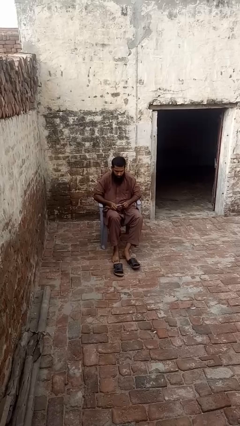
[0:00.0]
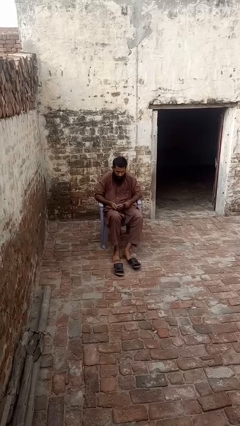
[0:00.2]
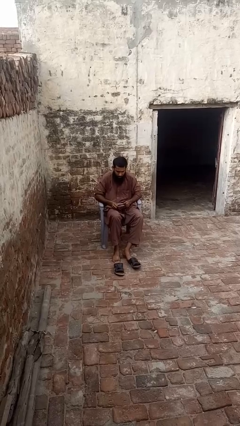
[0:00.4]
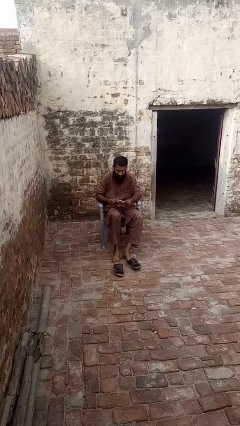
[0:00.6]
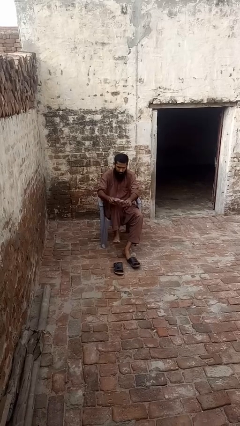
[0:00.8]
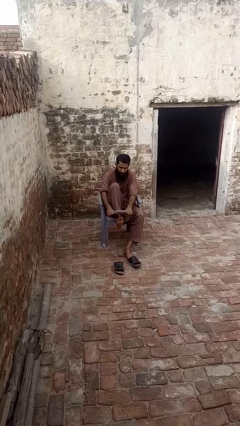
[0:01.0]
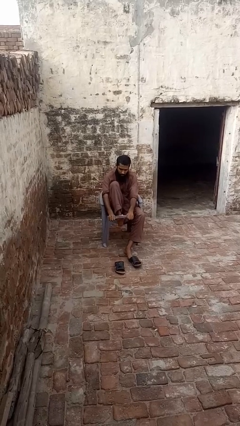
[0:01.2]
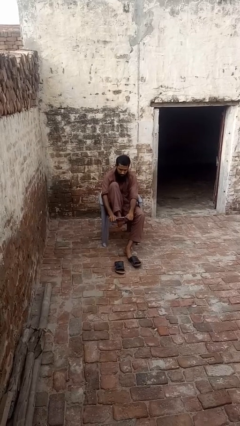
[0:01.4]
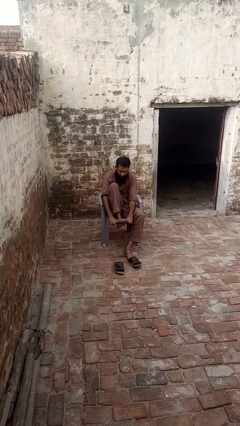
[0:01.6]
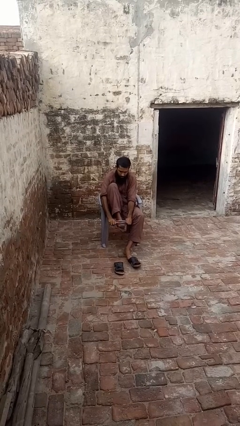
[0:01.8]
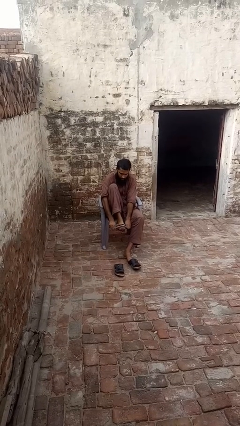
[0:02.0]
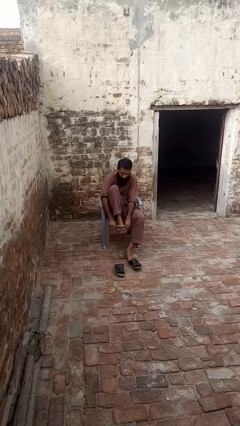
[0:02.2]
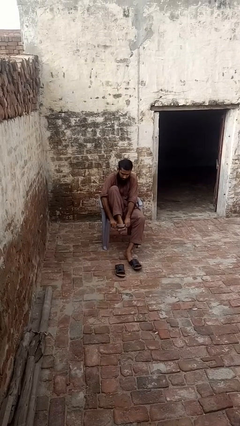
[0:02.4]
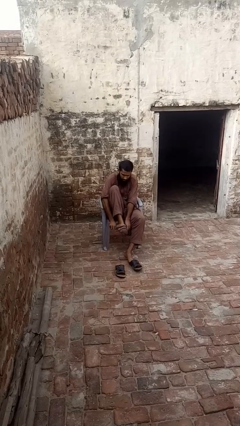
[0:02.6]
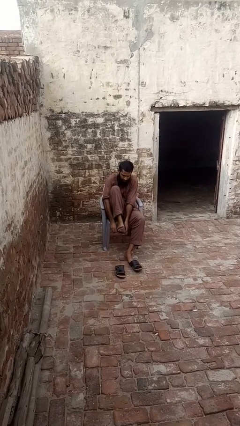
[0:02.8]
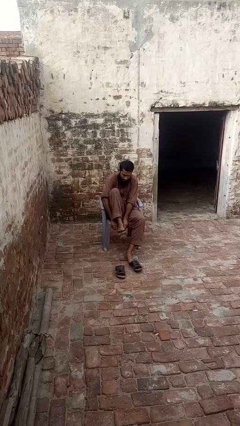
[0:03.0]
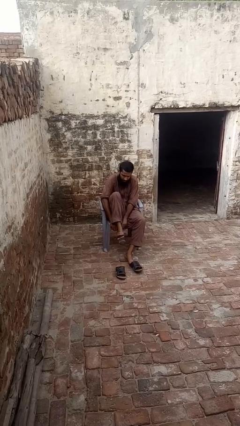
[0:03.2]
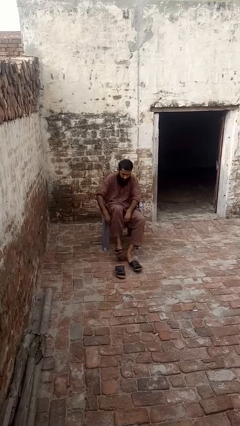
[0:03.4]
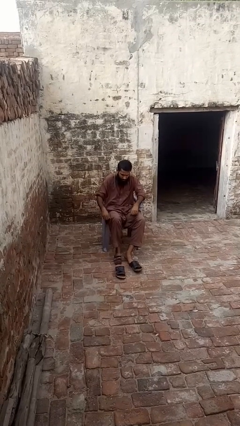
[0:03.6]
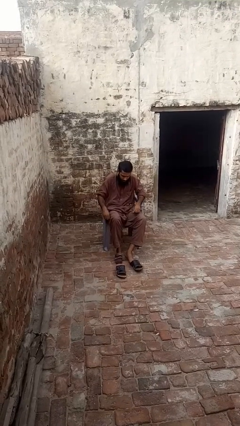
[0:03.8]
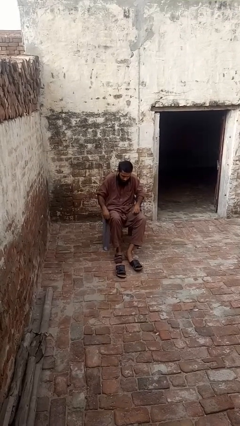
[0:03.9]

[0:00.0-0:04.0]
person puts on socks

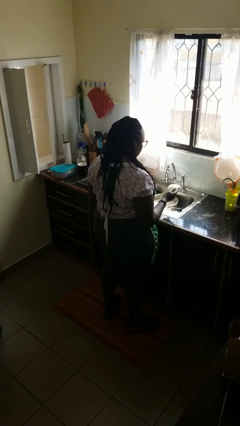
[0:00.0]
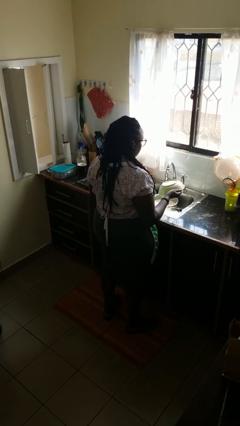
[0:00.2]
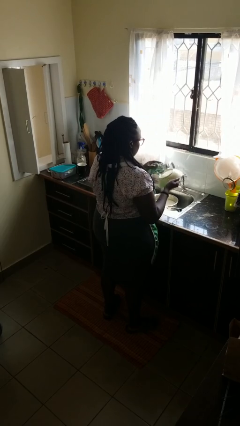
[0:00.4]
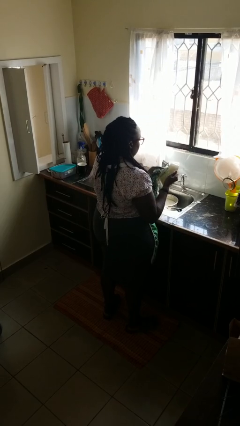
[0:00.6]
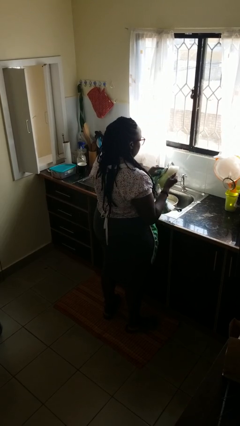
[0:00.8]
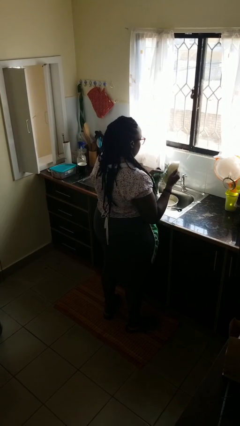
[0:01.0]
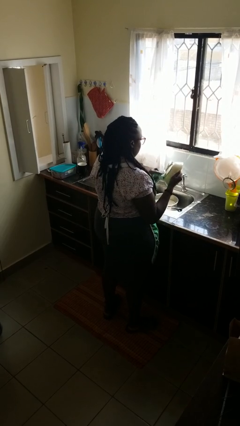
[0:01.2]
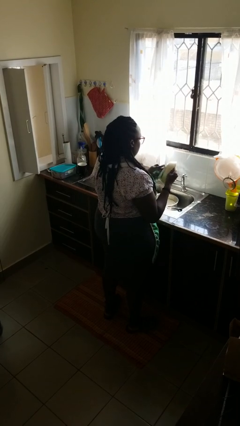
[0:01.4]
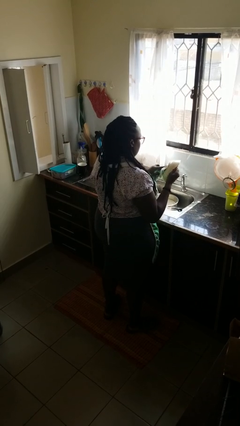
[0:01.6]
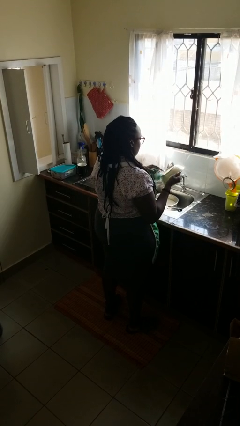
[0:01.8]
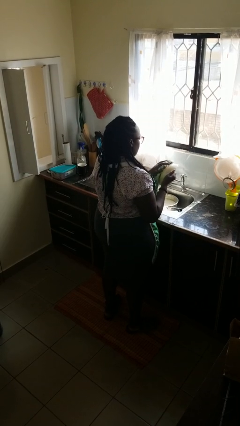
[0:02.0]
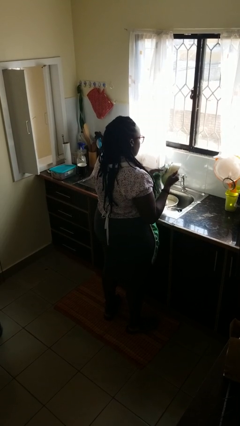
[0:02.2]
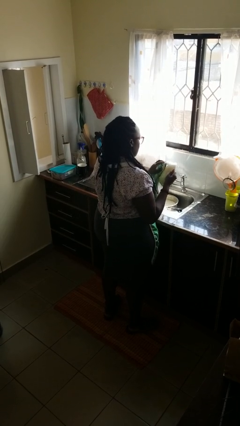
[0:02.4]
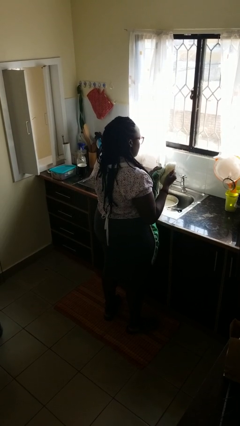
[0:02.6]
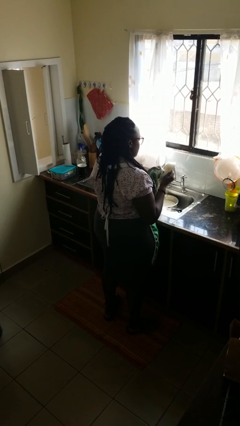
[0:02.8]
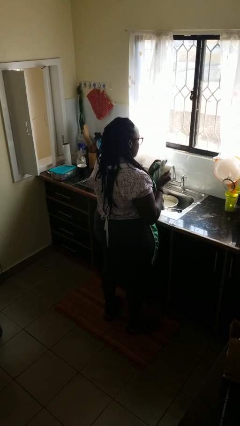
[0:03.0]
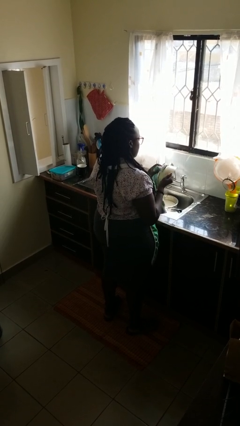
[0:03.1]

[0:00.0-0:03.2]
person dries dish

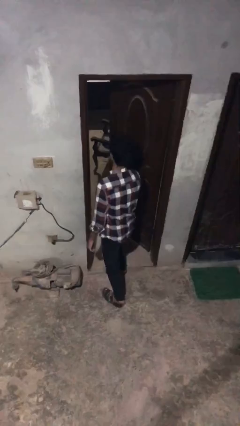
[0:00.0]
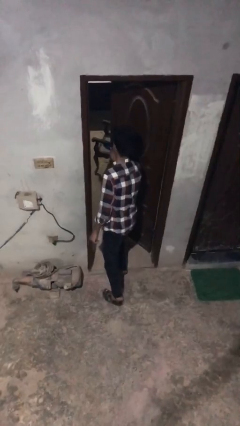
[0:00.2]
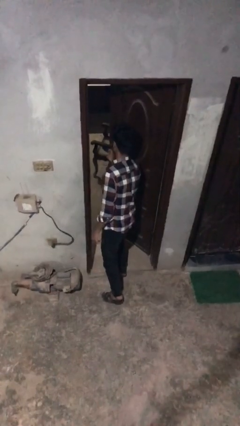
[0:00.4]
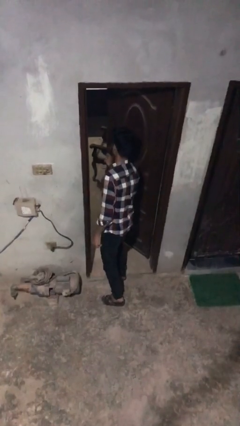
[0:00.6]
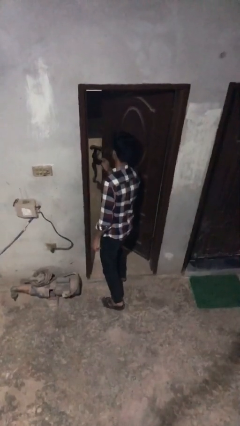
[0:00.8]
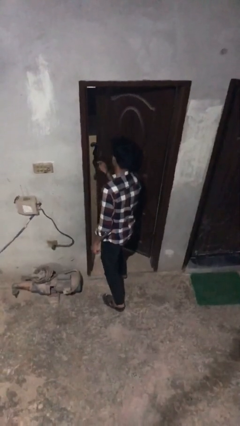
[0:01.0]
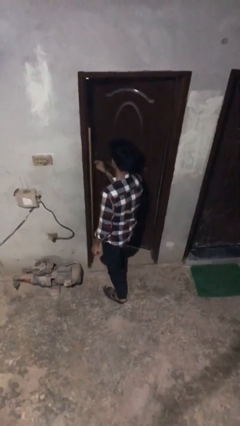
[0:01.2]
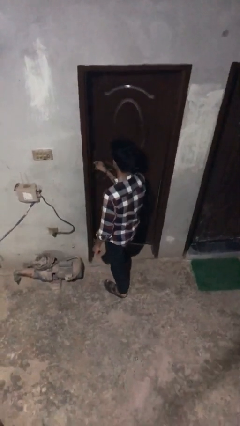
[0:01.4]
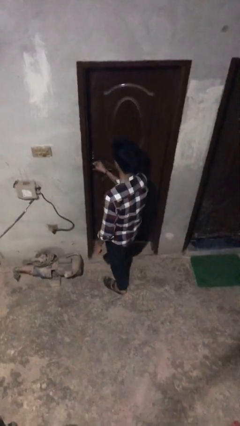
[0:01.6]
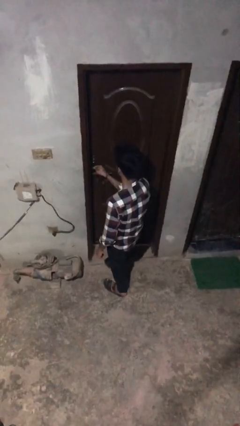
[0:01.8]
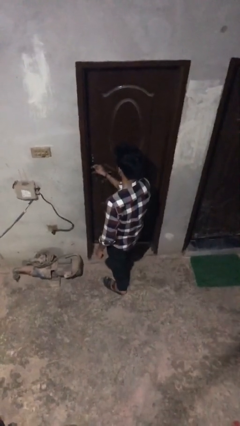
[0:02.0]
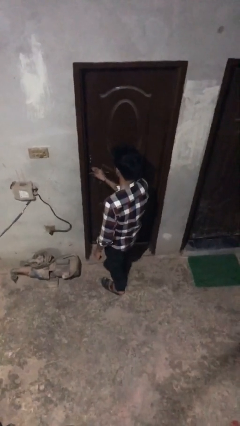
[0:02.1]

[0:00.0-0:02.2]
person closes facility door

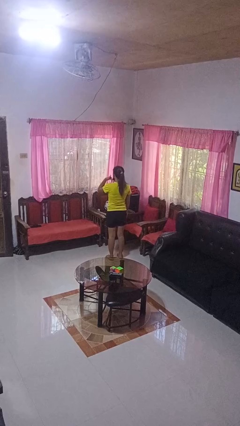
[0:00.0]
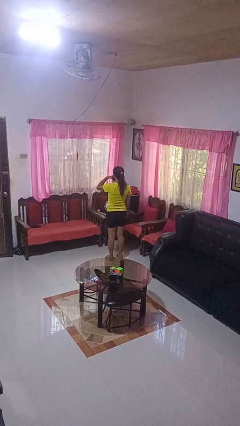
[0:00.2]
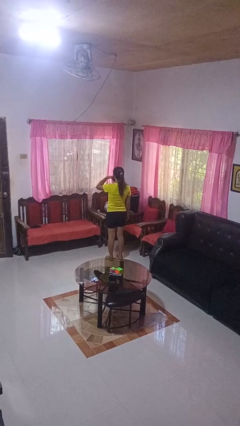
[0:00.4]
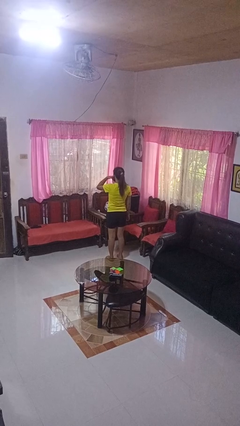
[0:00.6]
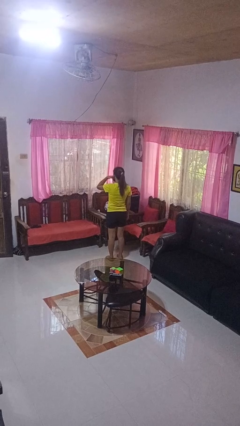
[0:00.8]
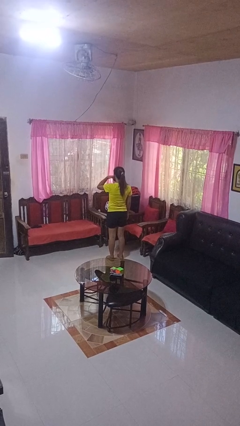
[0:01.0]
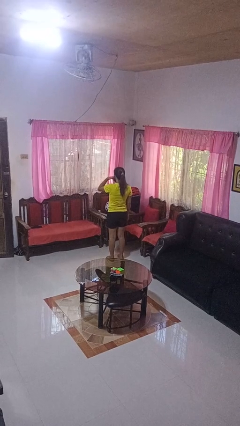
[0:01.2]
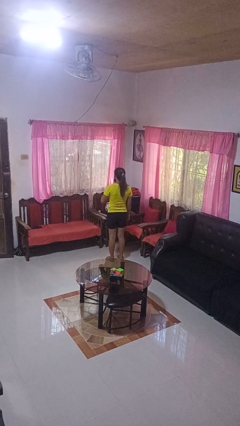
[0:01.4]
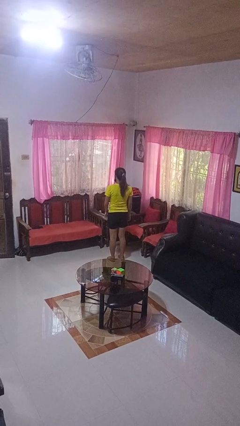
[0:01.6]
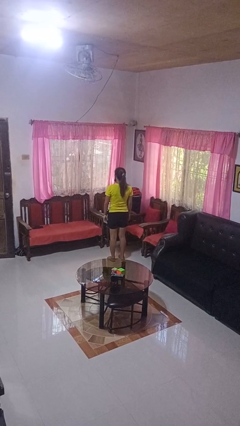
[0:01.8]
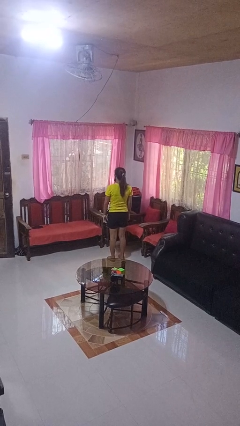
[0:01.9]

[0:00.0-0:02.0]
person gestures call me

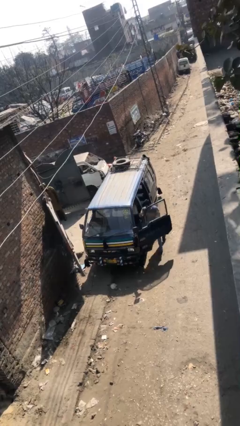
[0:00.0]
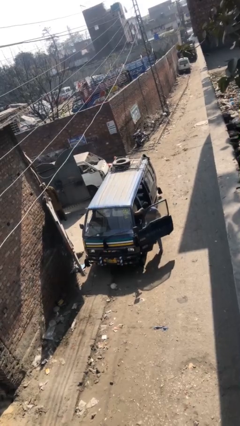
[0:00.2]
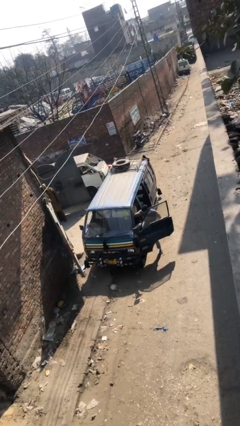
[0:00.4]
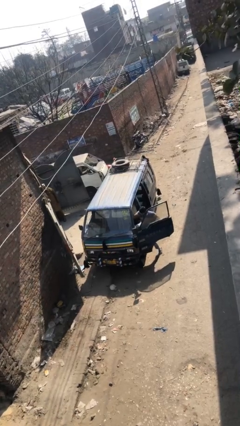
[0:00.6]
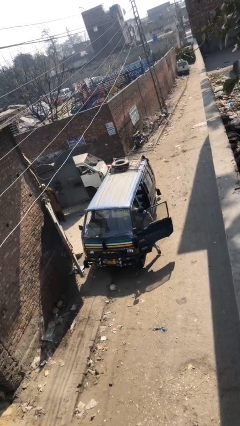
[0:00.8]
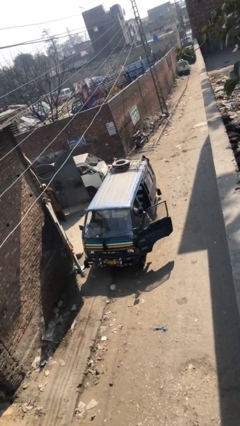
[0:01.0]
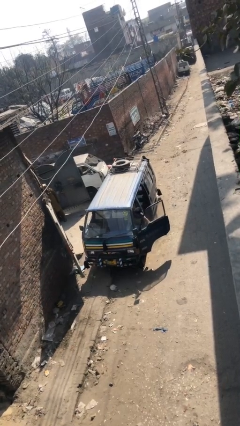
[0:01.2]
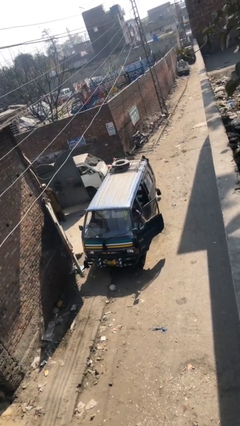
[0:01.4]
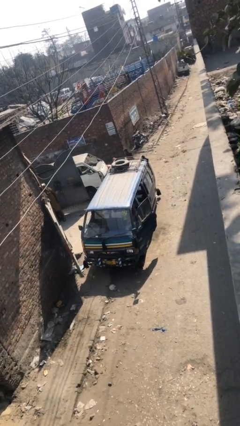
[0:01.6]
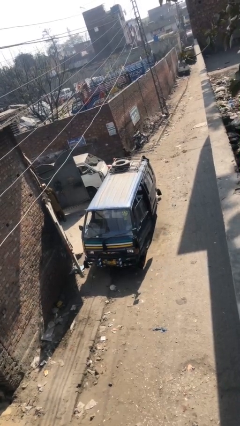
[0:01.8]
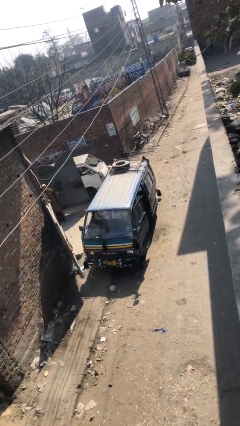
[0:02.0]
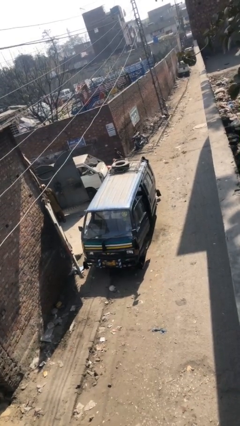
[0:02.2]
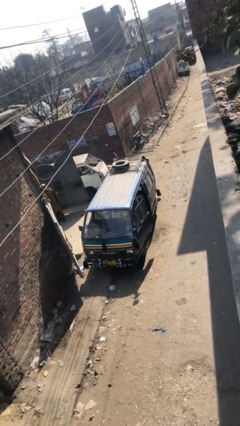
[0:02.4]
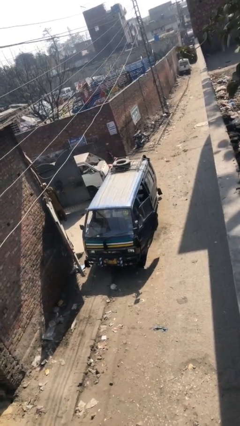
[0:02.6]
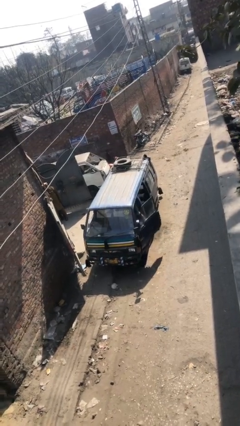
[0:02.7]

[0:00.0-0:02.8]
car picks up person

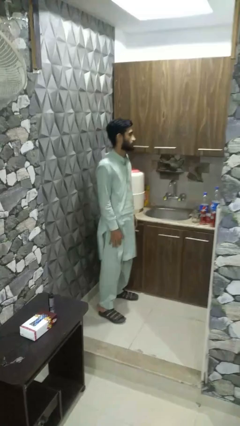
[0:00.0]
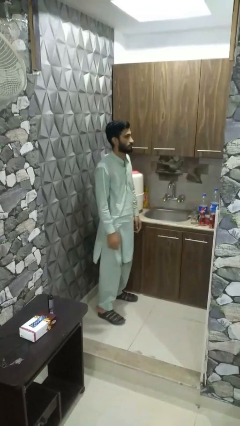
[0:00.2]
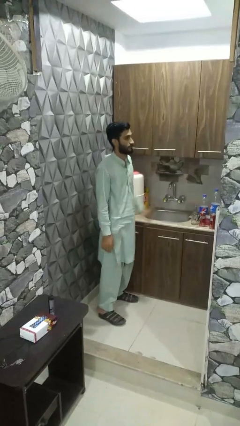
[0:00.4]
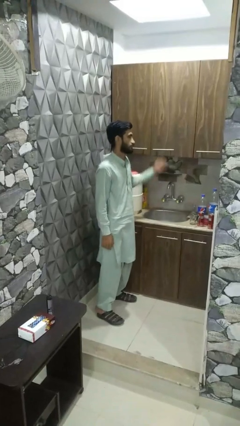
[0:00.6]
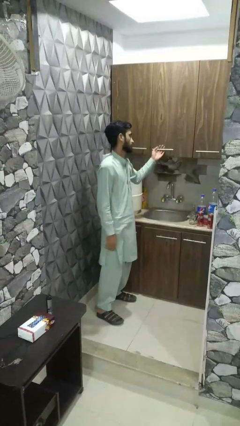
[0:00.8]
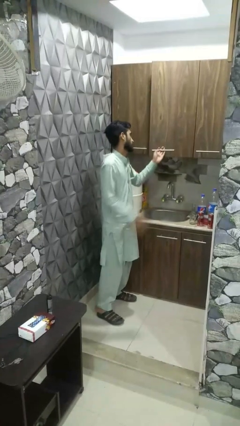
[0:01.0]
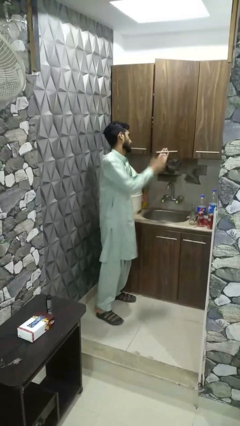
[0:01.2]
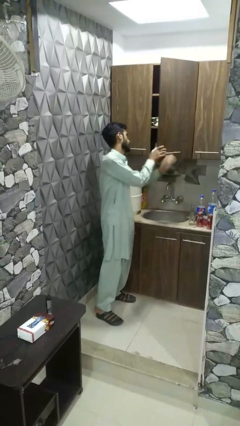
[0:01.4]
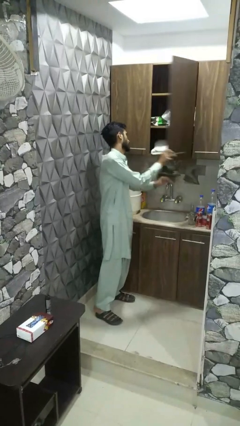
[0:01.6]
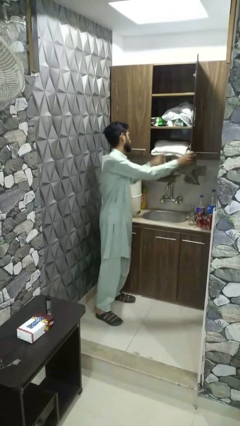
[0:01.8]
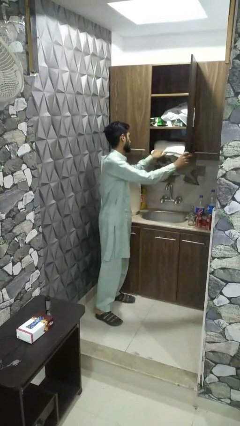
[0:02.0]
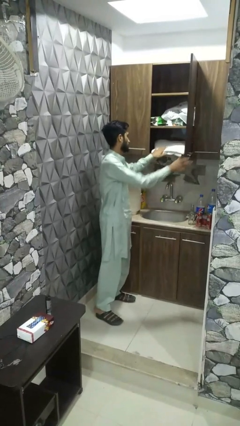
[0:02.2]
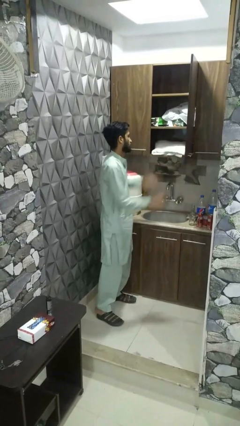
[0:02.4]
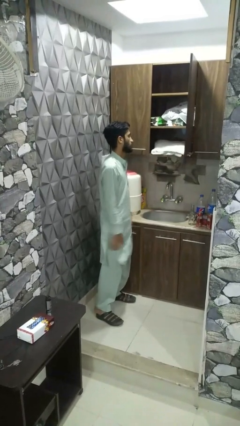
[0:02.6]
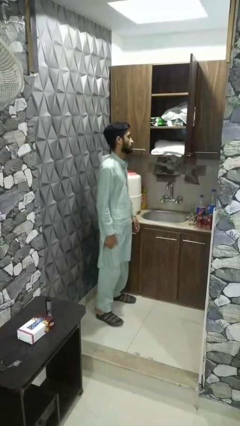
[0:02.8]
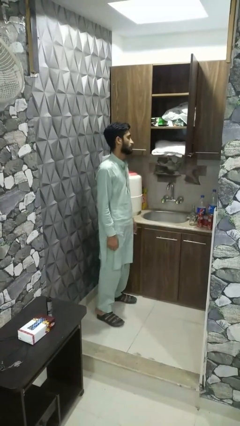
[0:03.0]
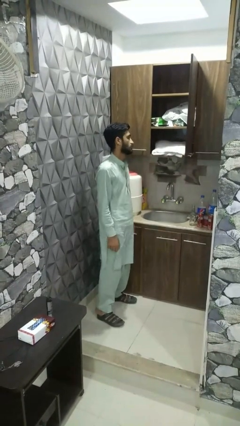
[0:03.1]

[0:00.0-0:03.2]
person opens dresser drawer
